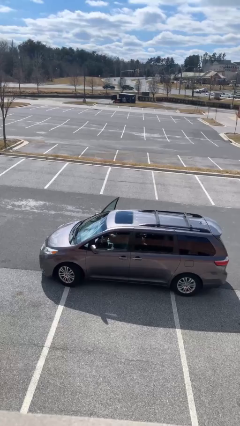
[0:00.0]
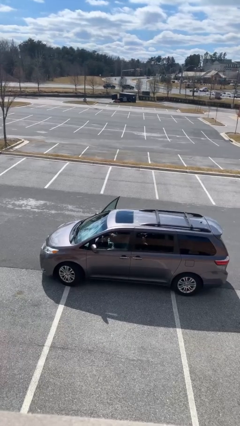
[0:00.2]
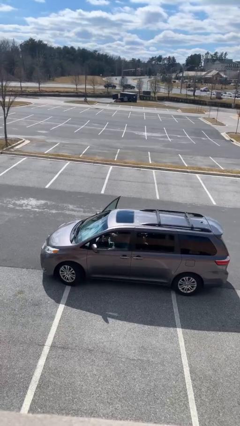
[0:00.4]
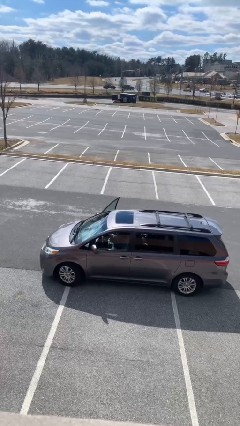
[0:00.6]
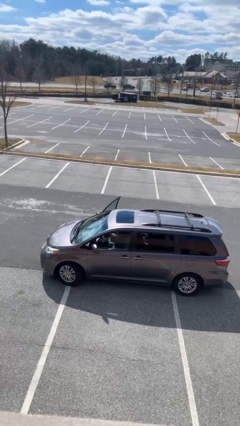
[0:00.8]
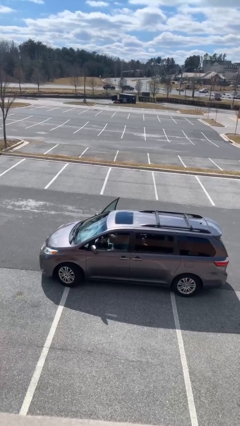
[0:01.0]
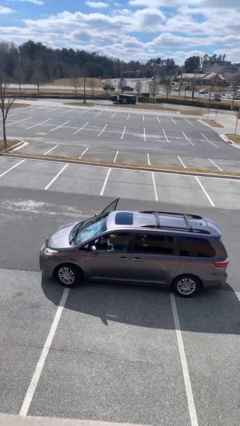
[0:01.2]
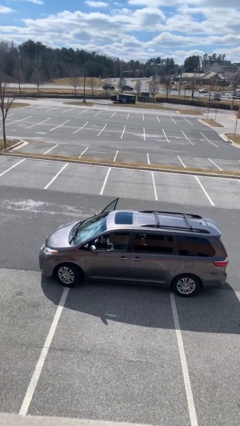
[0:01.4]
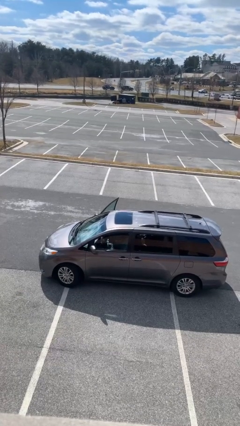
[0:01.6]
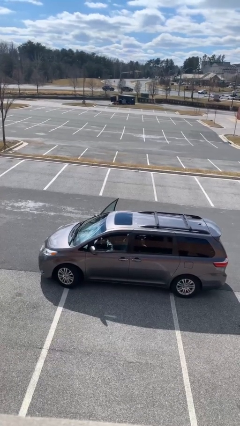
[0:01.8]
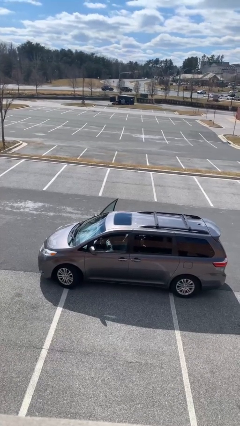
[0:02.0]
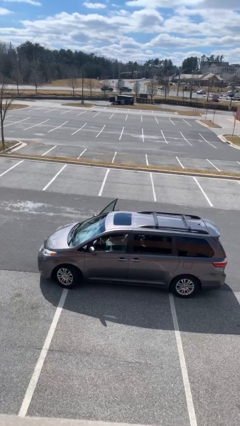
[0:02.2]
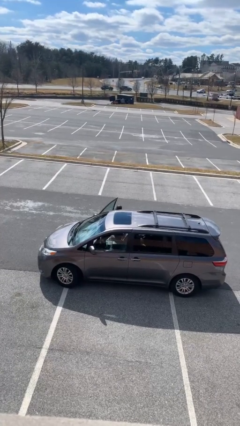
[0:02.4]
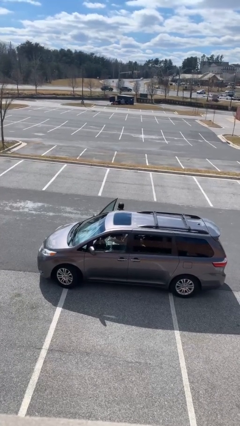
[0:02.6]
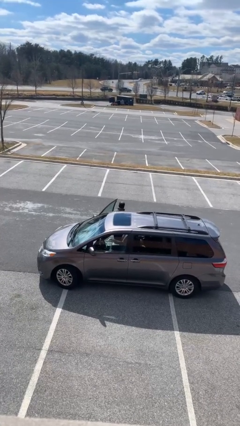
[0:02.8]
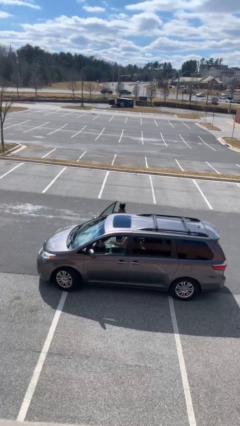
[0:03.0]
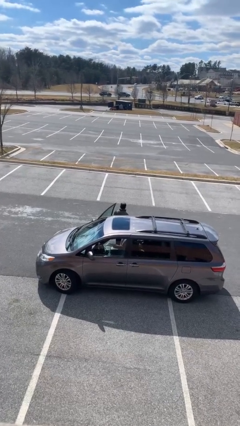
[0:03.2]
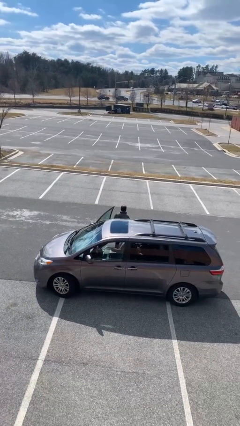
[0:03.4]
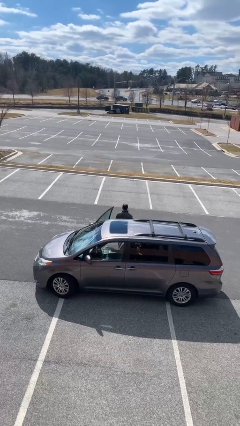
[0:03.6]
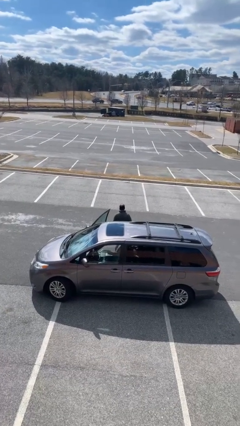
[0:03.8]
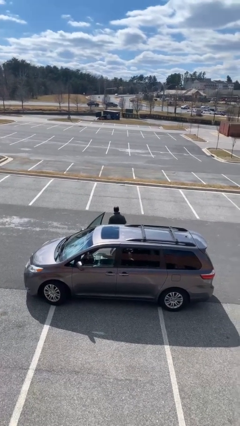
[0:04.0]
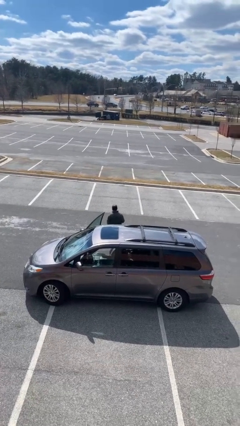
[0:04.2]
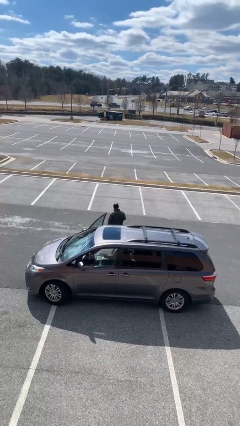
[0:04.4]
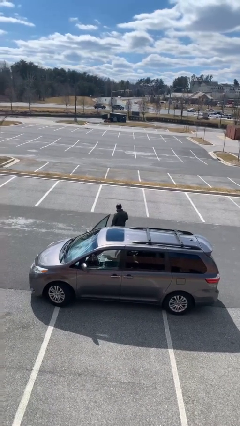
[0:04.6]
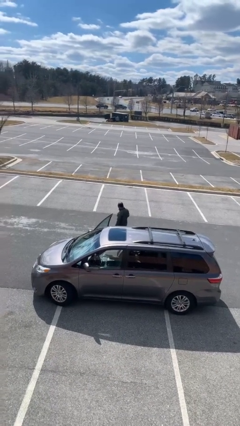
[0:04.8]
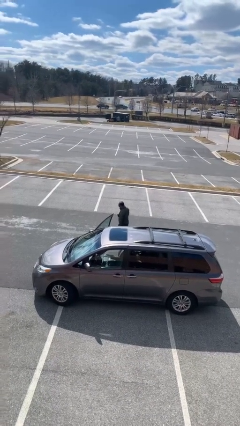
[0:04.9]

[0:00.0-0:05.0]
person exits car

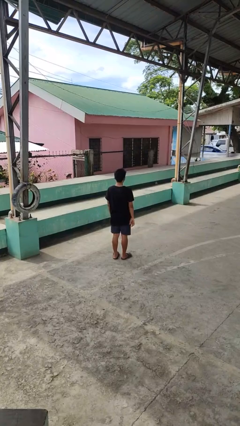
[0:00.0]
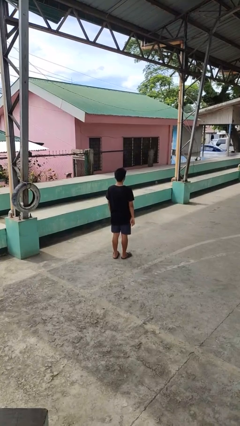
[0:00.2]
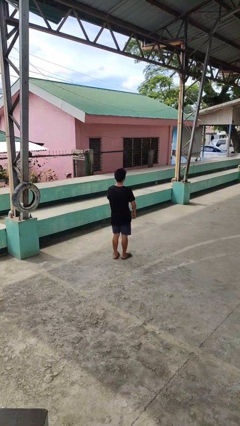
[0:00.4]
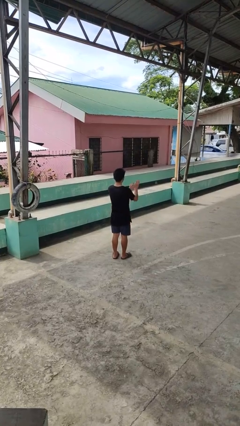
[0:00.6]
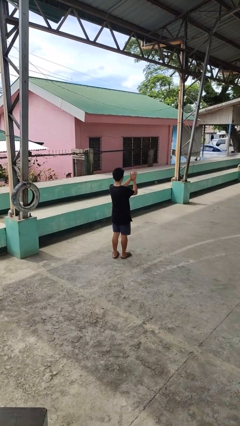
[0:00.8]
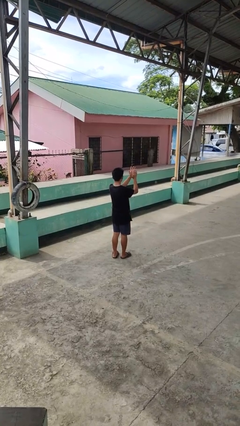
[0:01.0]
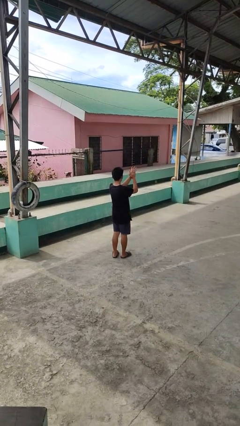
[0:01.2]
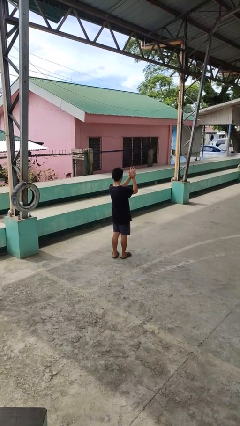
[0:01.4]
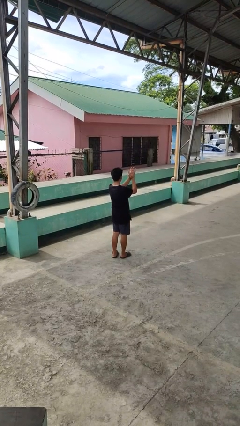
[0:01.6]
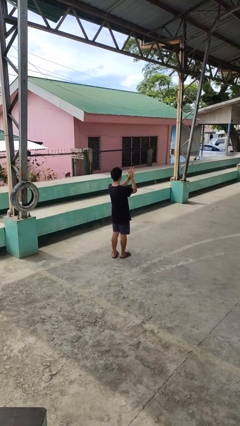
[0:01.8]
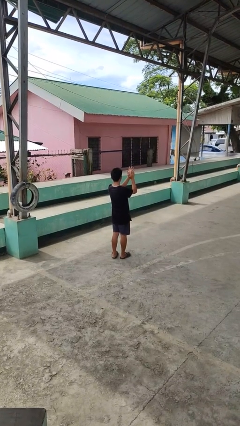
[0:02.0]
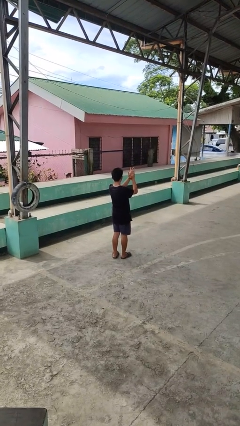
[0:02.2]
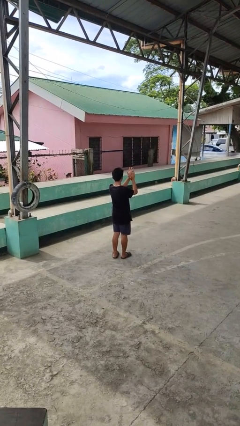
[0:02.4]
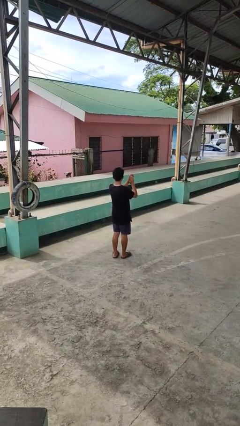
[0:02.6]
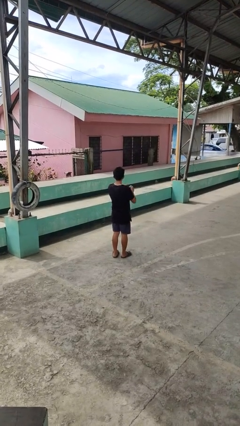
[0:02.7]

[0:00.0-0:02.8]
person claps hands

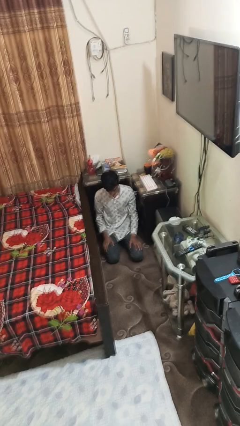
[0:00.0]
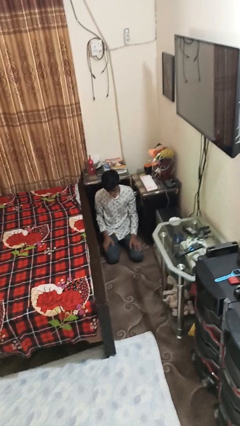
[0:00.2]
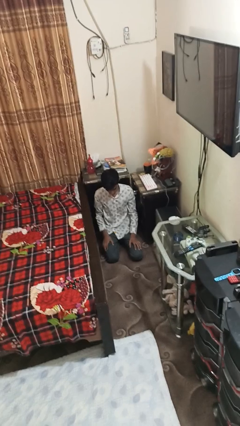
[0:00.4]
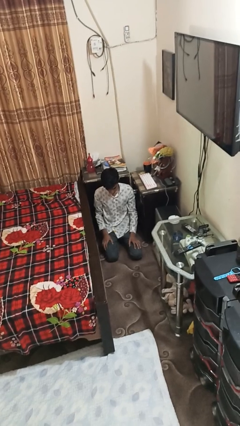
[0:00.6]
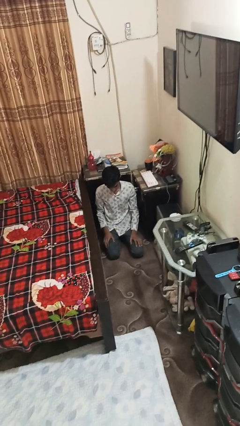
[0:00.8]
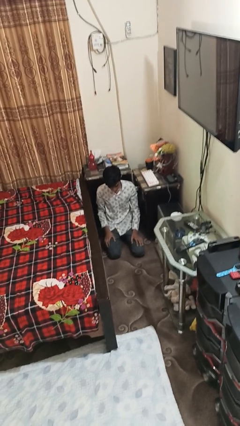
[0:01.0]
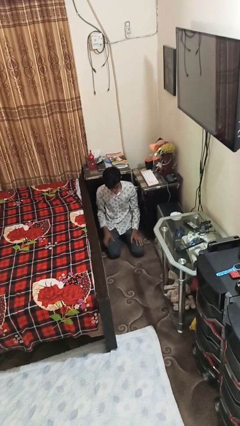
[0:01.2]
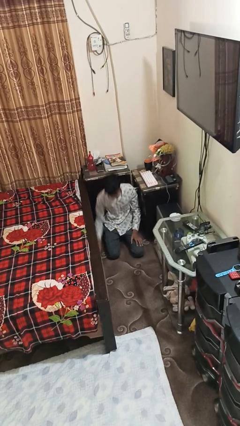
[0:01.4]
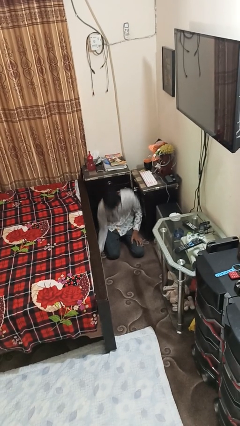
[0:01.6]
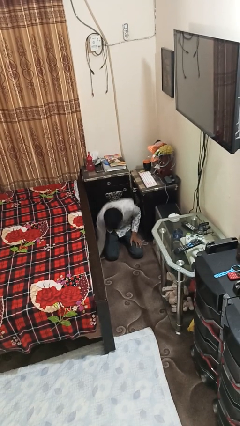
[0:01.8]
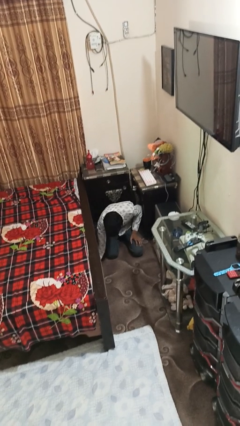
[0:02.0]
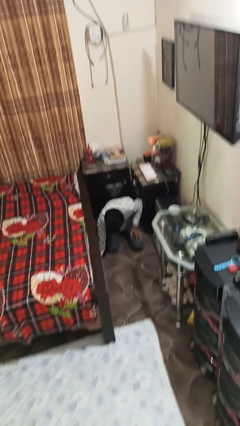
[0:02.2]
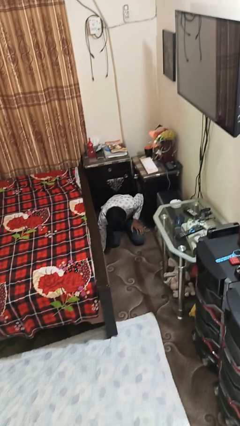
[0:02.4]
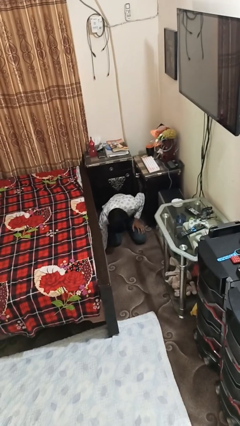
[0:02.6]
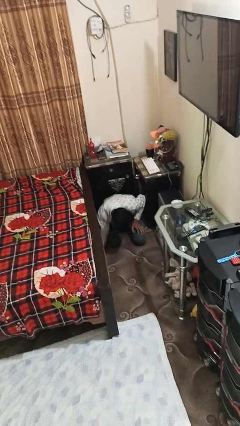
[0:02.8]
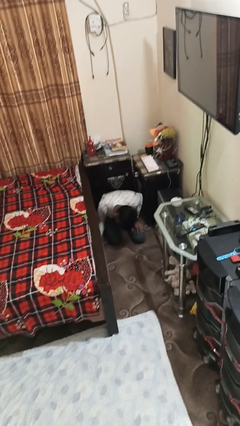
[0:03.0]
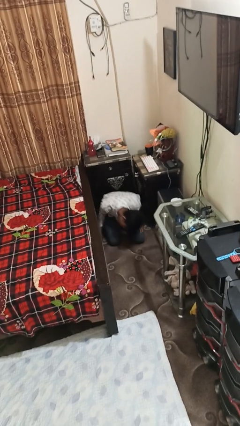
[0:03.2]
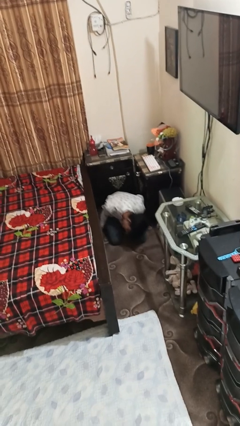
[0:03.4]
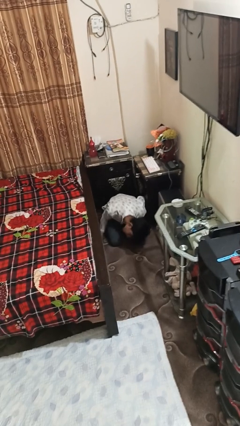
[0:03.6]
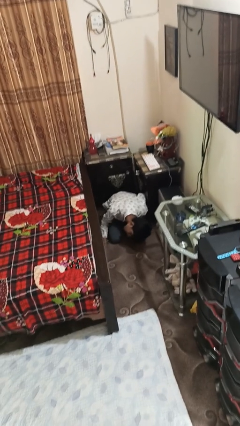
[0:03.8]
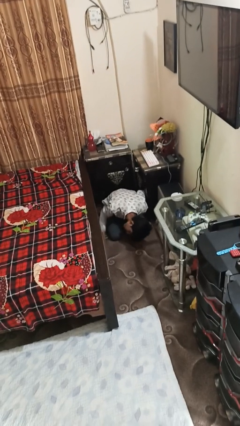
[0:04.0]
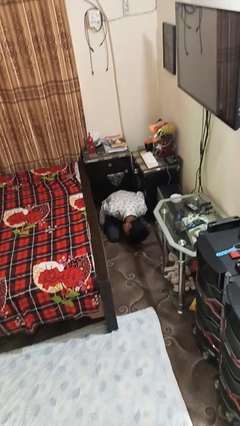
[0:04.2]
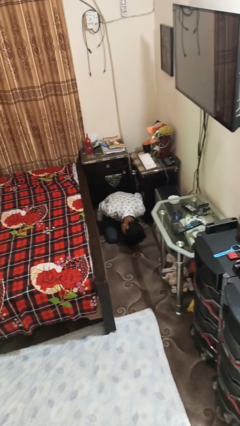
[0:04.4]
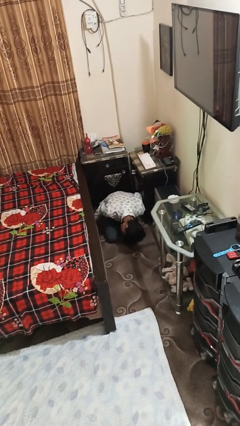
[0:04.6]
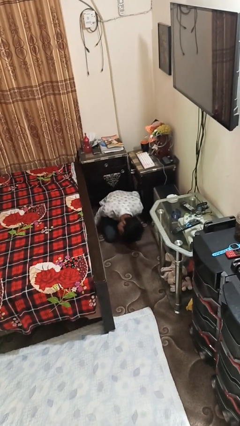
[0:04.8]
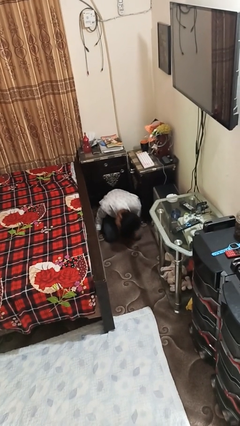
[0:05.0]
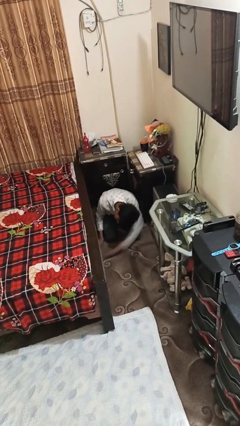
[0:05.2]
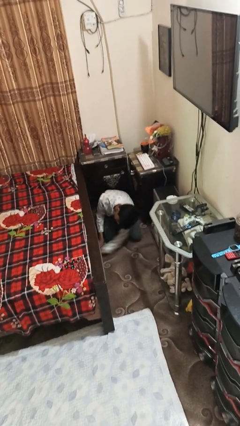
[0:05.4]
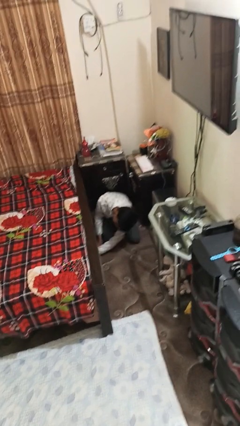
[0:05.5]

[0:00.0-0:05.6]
person searches under bed

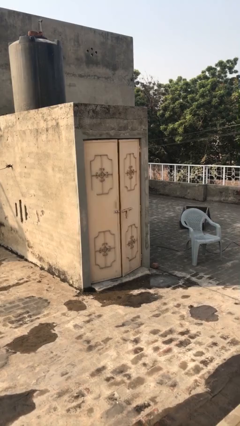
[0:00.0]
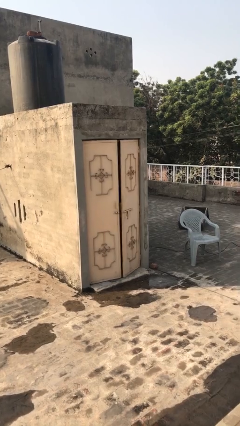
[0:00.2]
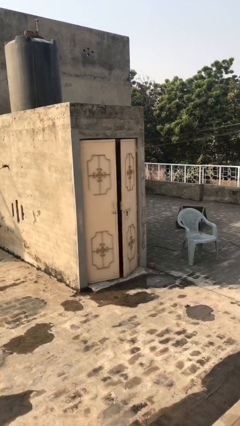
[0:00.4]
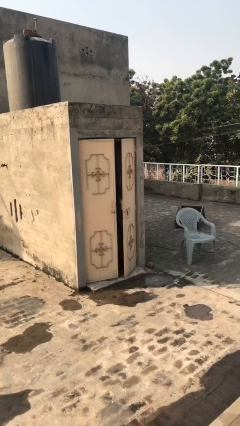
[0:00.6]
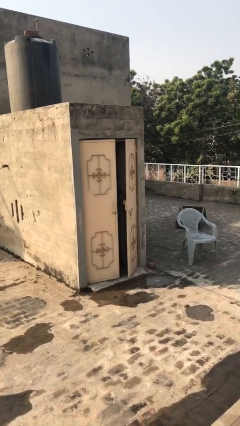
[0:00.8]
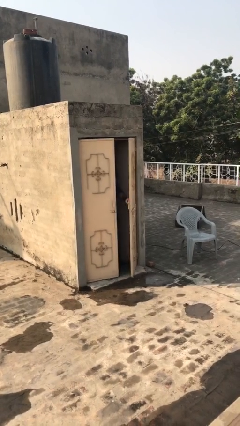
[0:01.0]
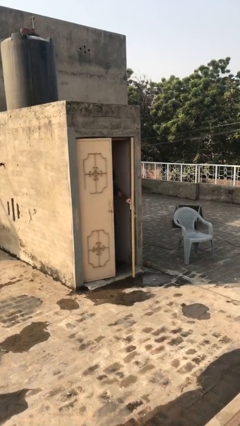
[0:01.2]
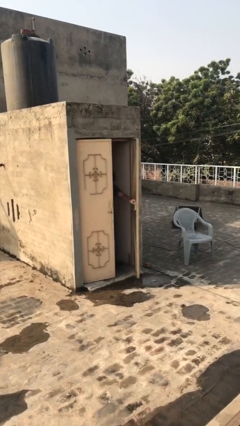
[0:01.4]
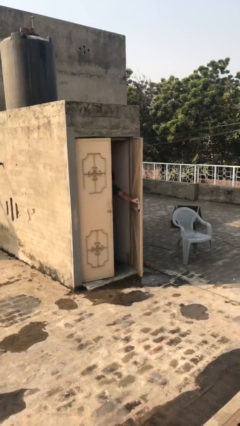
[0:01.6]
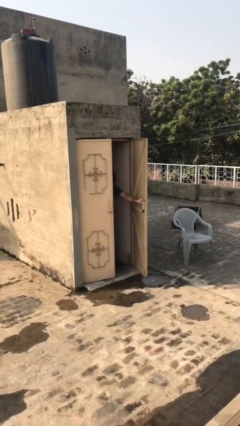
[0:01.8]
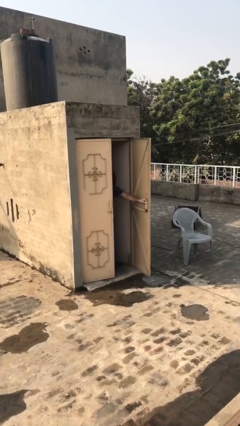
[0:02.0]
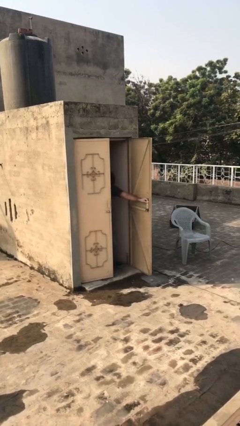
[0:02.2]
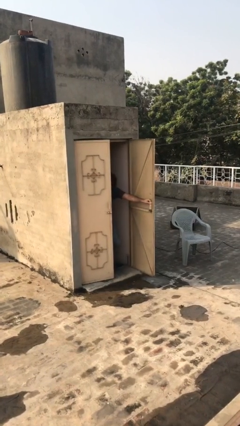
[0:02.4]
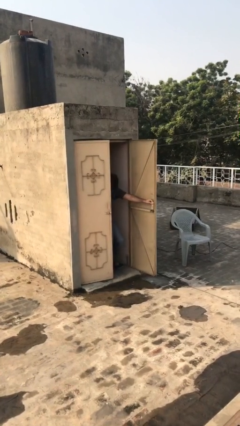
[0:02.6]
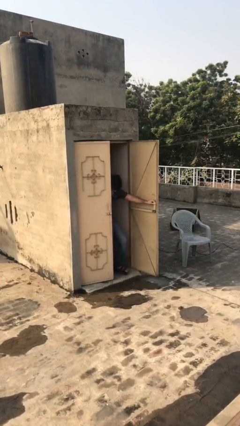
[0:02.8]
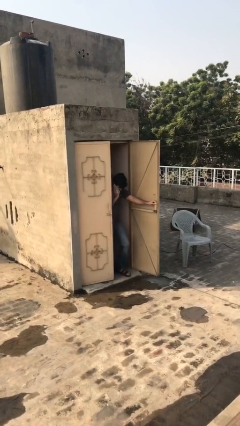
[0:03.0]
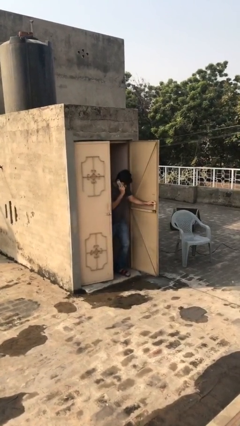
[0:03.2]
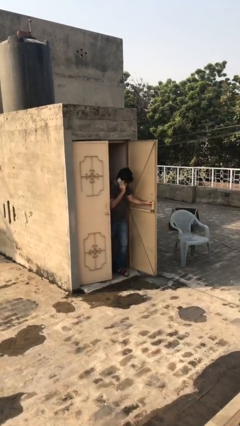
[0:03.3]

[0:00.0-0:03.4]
person opens facility door

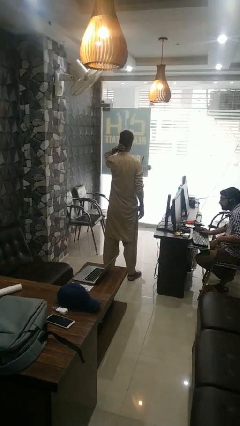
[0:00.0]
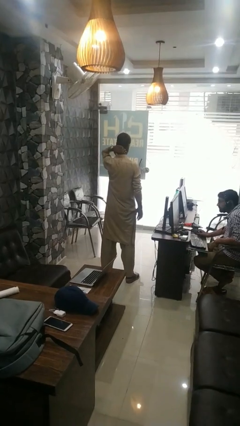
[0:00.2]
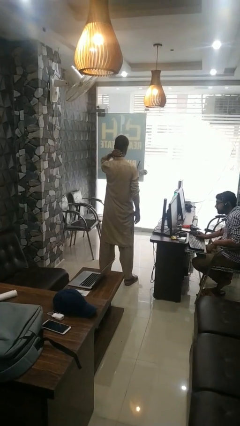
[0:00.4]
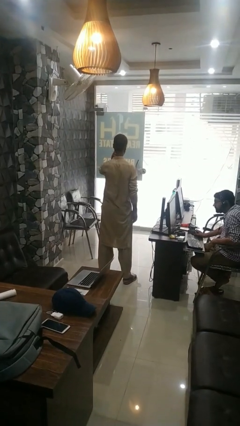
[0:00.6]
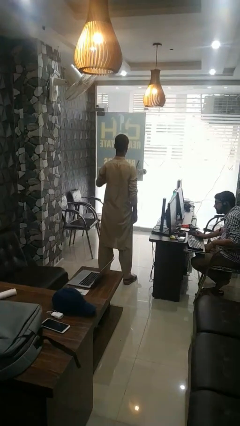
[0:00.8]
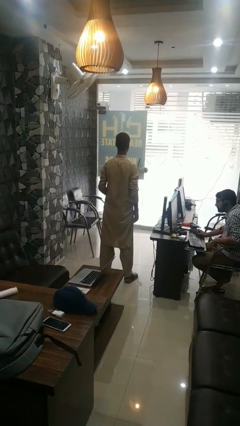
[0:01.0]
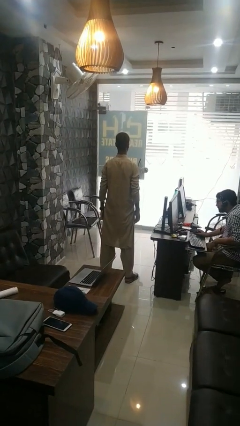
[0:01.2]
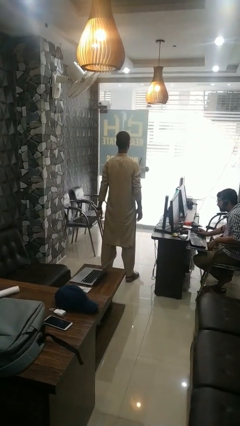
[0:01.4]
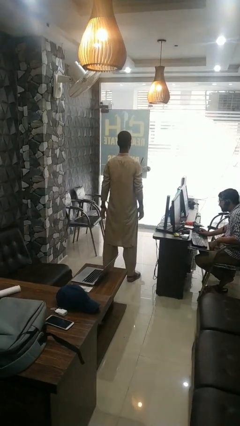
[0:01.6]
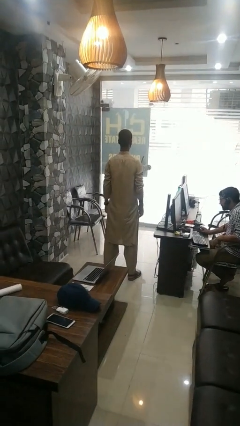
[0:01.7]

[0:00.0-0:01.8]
person rubs neck
